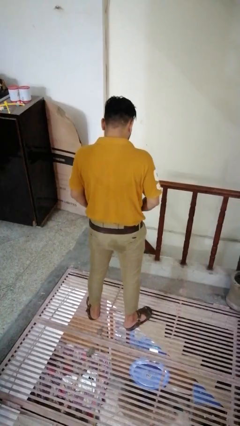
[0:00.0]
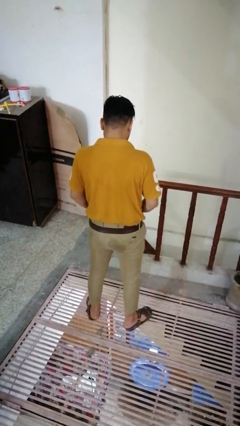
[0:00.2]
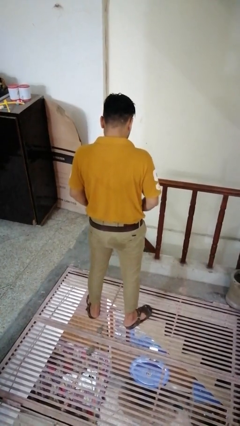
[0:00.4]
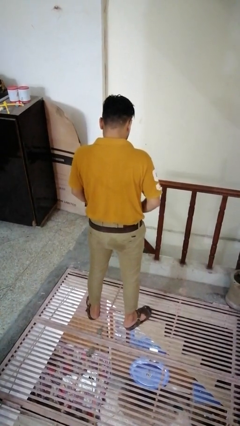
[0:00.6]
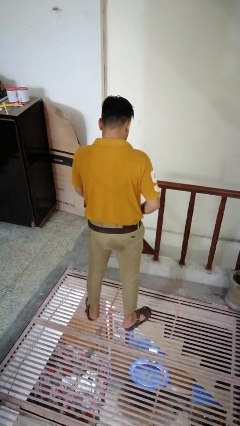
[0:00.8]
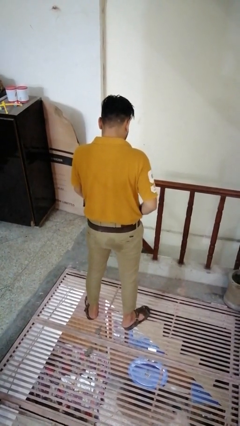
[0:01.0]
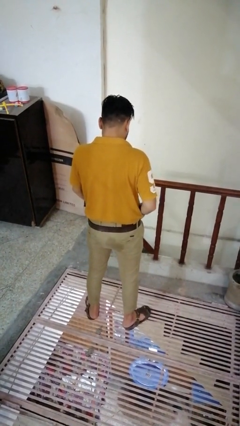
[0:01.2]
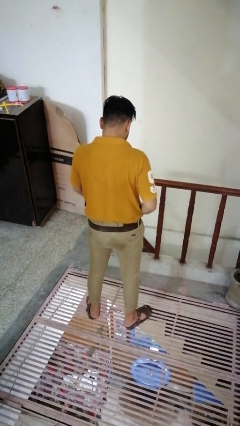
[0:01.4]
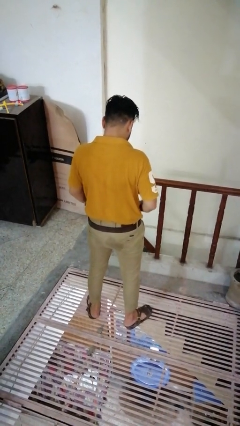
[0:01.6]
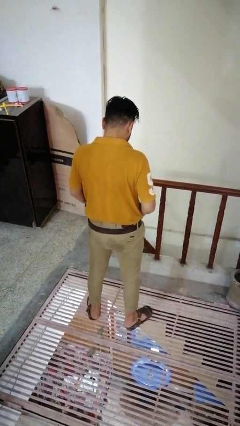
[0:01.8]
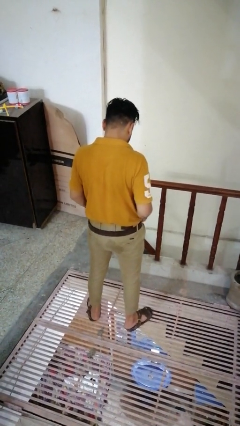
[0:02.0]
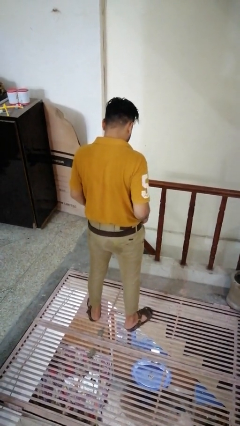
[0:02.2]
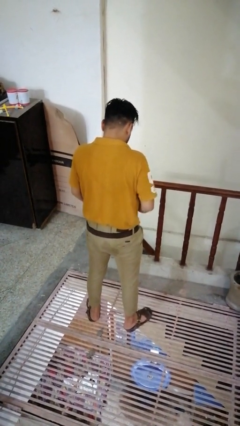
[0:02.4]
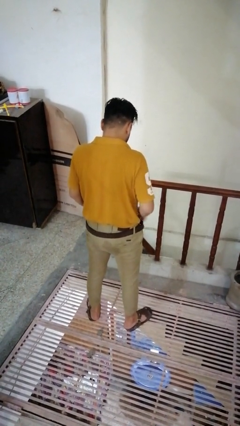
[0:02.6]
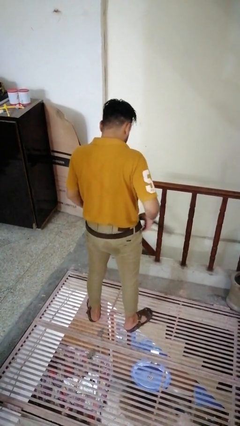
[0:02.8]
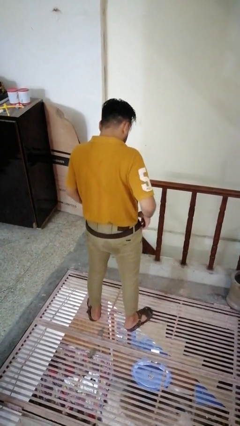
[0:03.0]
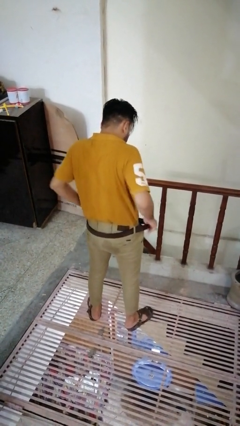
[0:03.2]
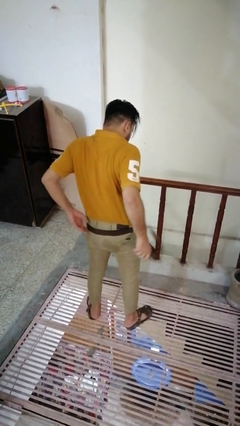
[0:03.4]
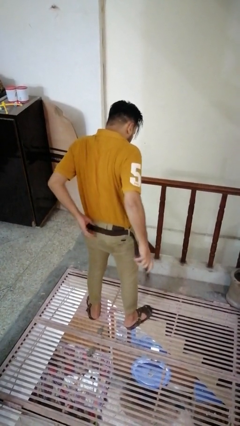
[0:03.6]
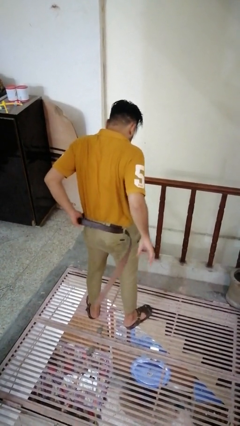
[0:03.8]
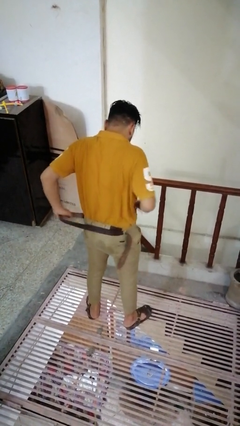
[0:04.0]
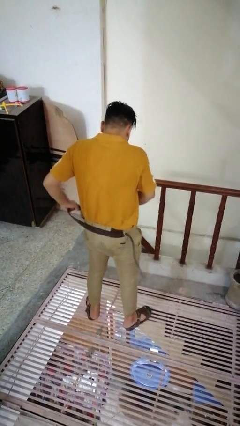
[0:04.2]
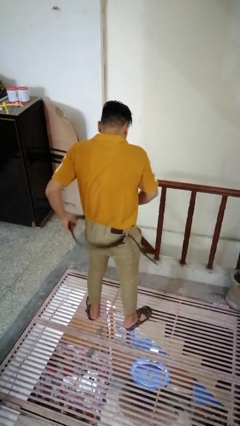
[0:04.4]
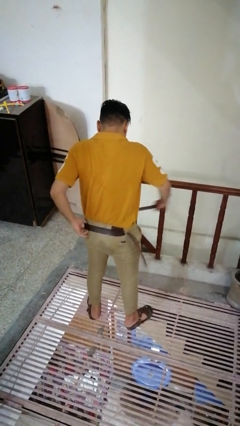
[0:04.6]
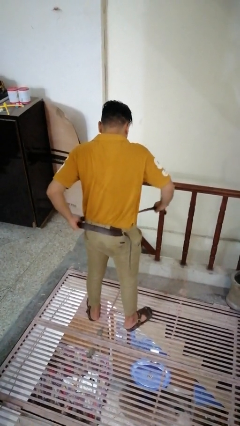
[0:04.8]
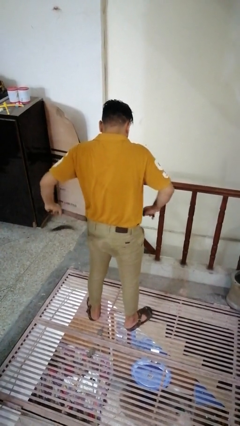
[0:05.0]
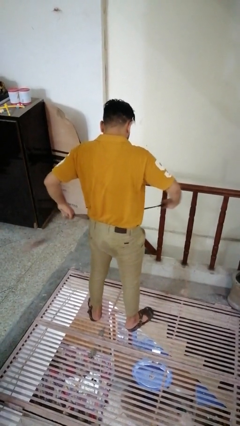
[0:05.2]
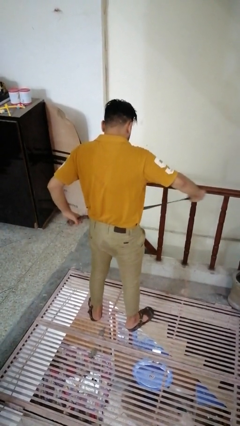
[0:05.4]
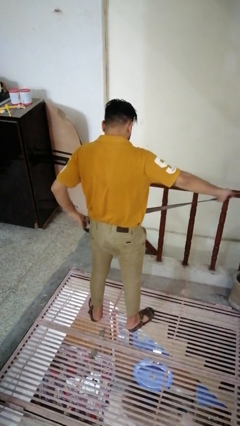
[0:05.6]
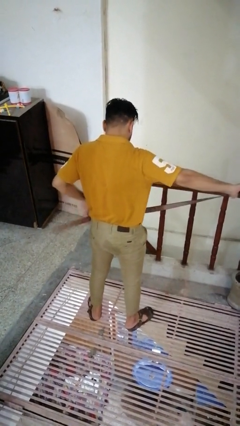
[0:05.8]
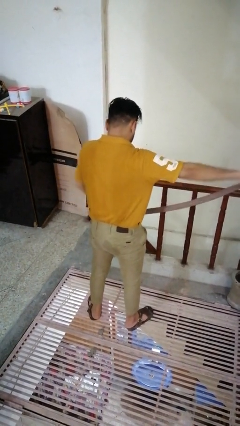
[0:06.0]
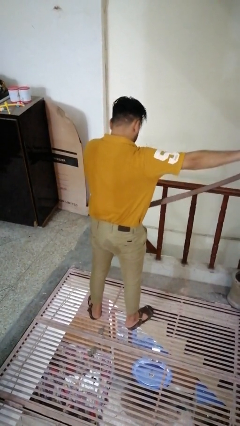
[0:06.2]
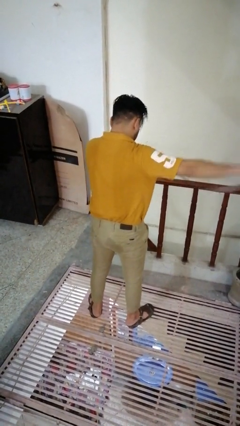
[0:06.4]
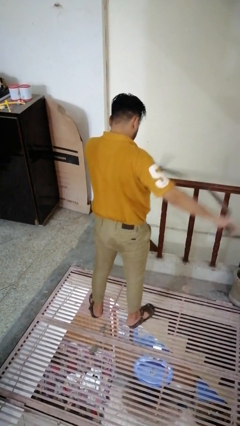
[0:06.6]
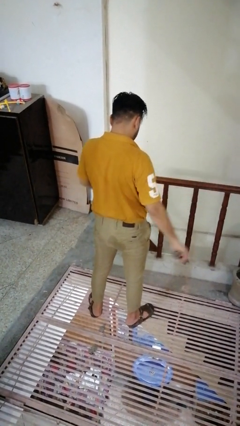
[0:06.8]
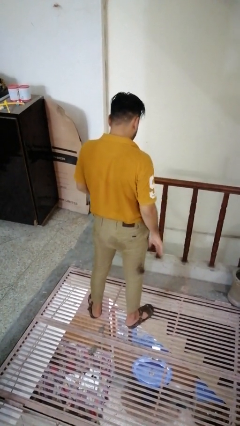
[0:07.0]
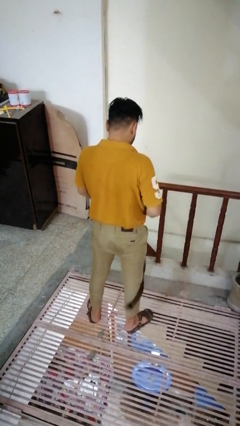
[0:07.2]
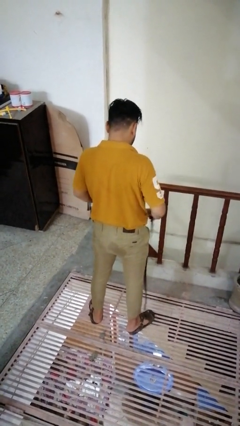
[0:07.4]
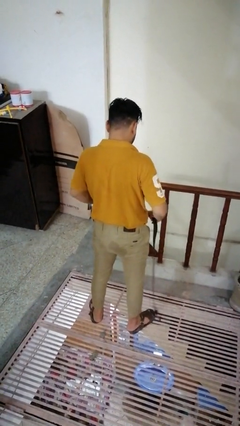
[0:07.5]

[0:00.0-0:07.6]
person takes off belt

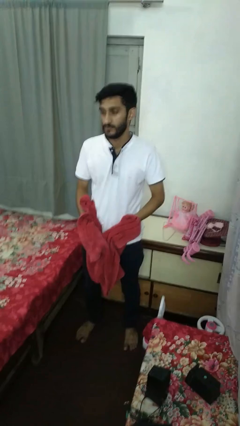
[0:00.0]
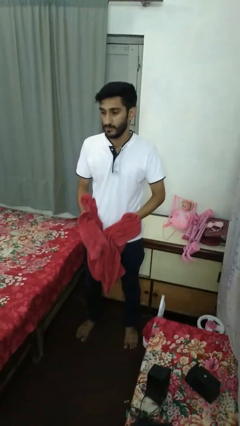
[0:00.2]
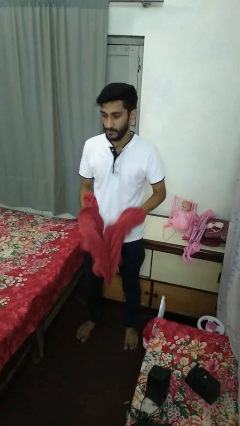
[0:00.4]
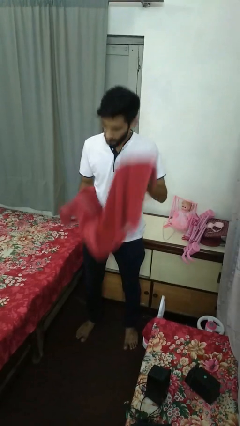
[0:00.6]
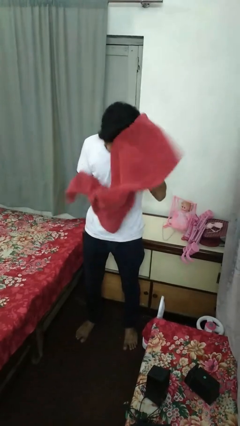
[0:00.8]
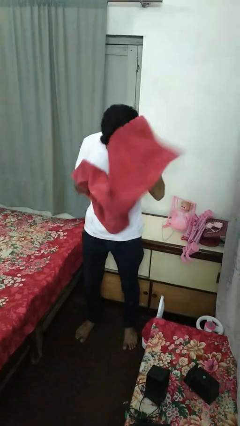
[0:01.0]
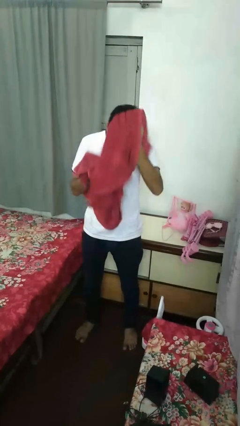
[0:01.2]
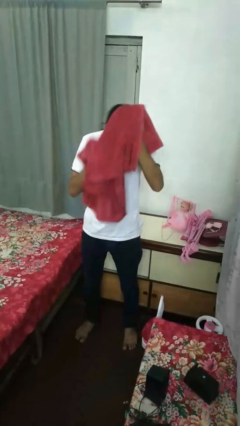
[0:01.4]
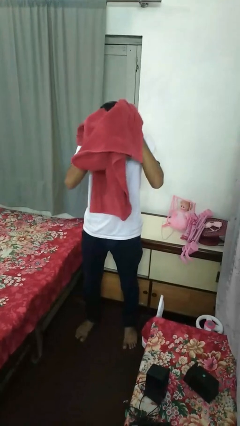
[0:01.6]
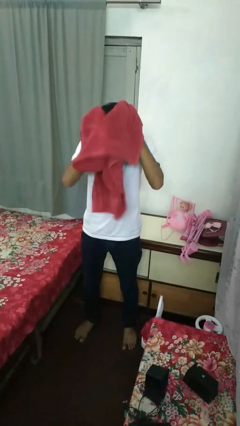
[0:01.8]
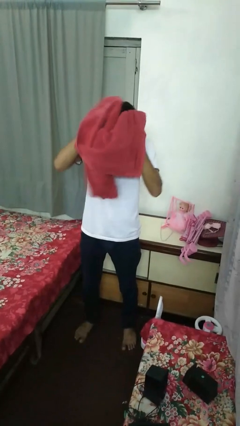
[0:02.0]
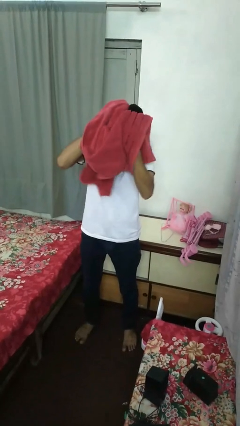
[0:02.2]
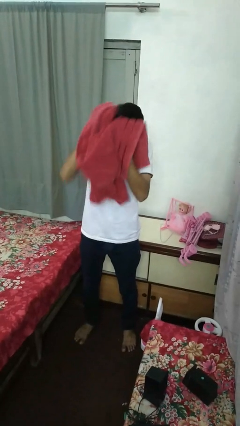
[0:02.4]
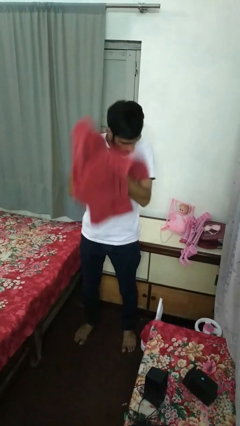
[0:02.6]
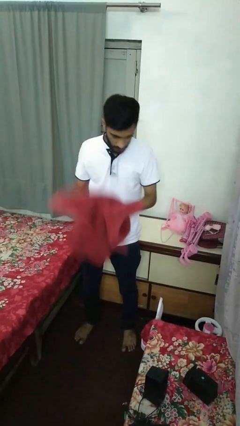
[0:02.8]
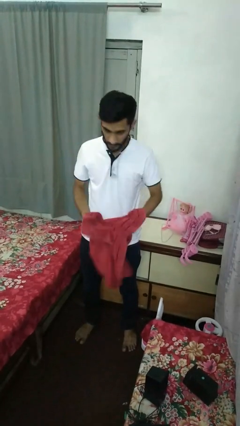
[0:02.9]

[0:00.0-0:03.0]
person dries hair with towel

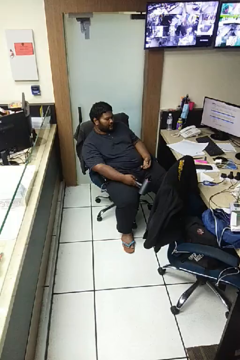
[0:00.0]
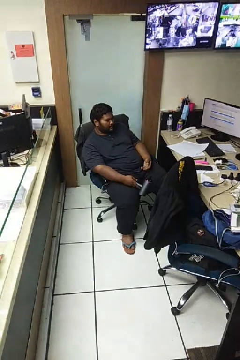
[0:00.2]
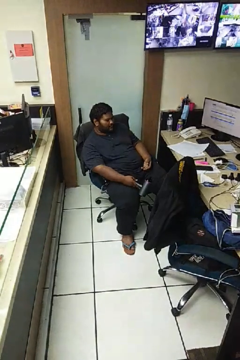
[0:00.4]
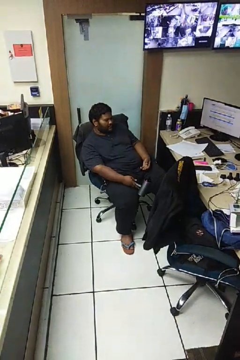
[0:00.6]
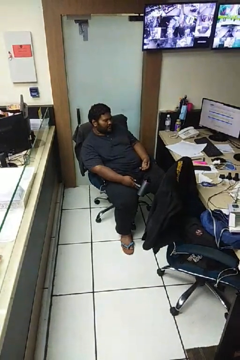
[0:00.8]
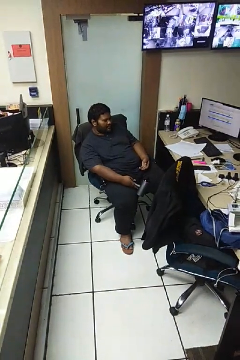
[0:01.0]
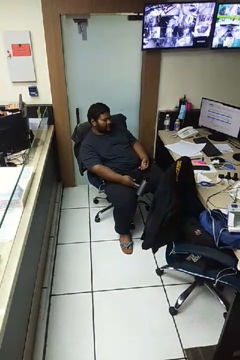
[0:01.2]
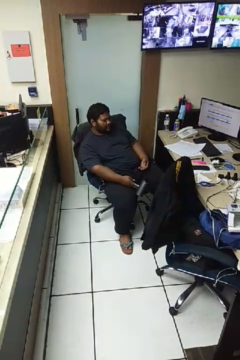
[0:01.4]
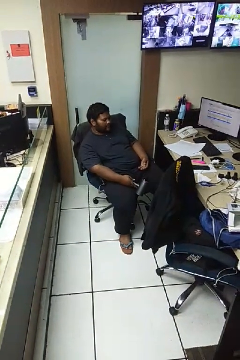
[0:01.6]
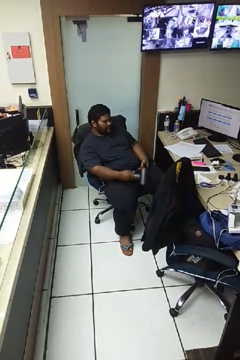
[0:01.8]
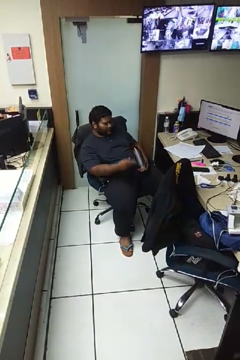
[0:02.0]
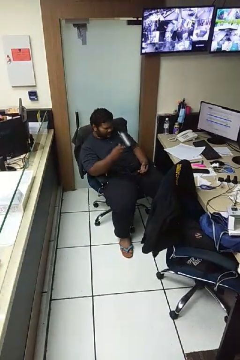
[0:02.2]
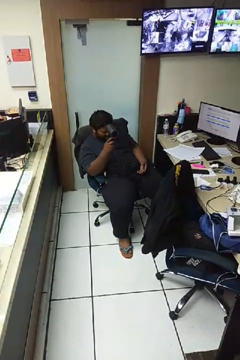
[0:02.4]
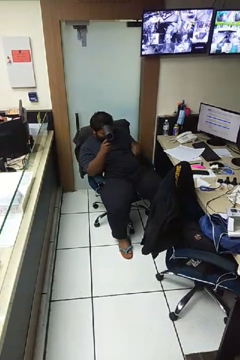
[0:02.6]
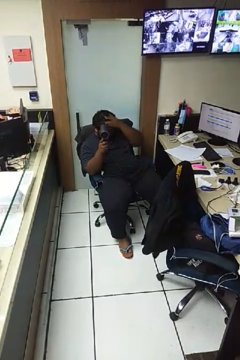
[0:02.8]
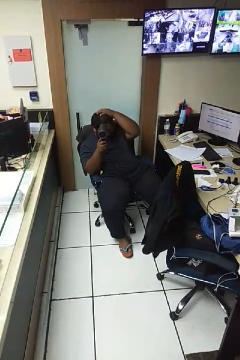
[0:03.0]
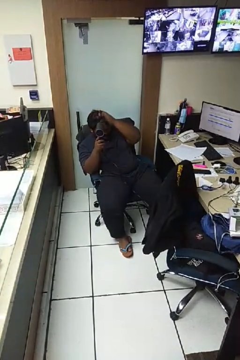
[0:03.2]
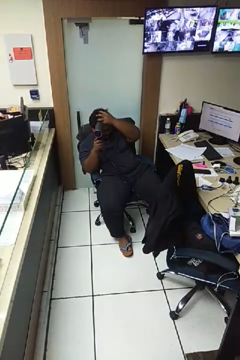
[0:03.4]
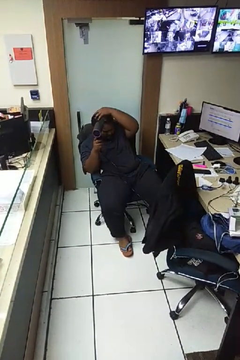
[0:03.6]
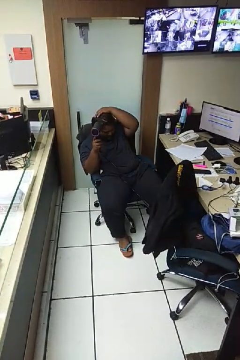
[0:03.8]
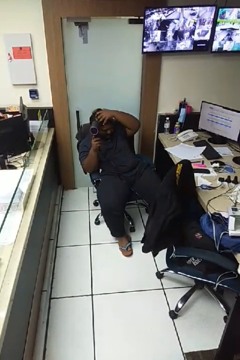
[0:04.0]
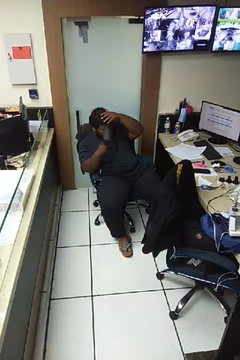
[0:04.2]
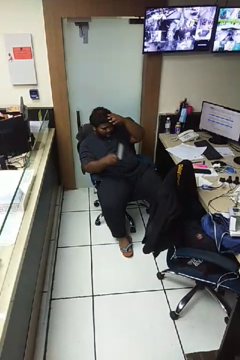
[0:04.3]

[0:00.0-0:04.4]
person dries hair with hairdryer

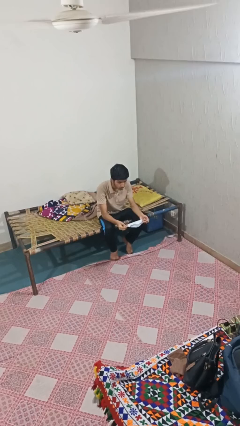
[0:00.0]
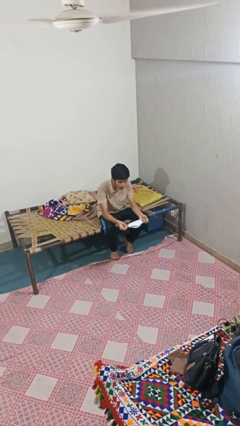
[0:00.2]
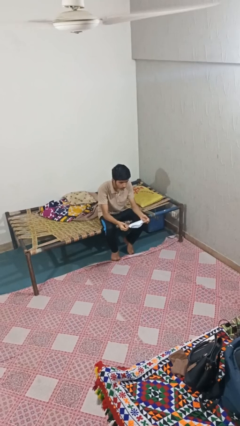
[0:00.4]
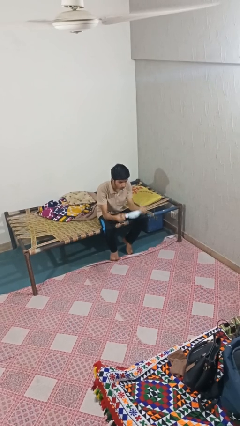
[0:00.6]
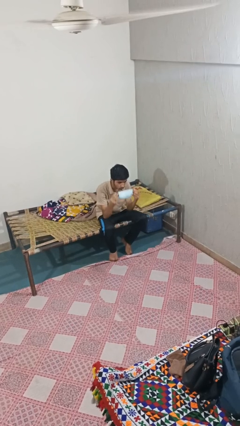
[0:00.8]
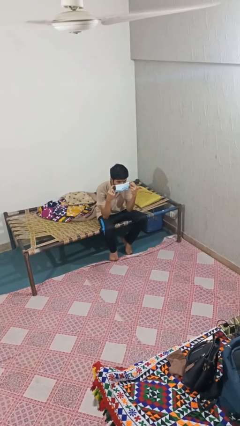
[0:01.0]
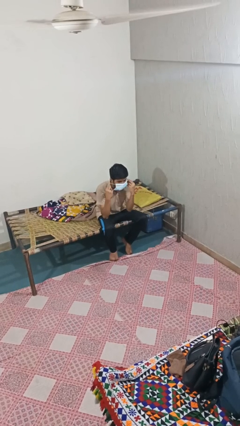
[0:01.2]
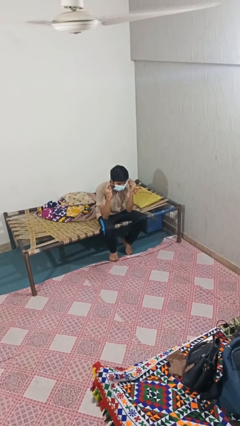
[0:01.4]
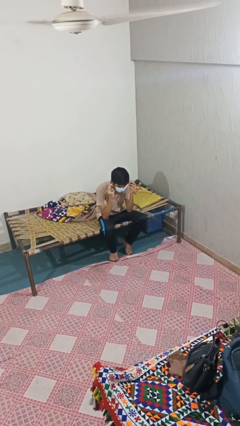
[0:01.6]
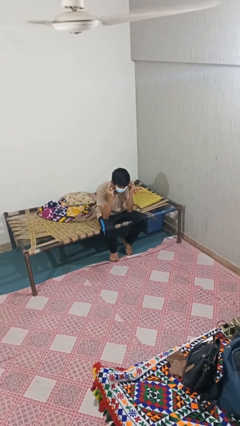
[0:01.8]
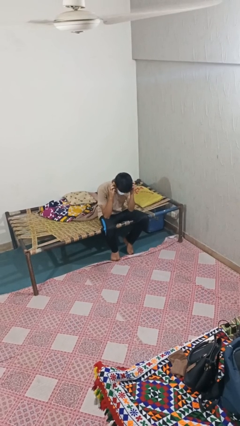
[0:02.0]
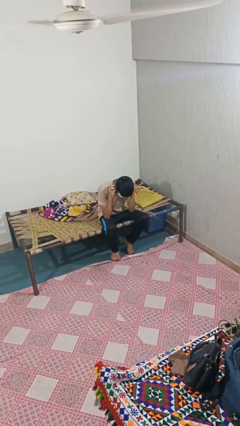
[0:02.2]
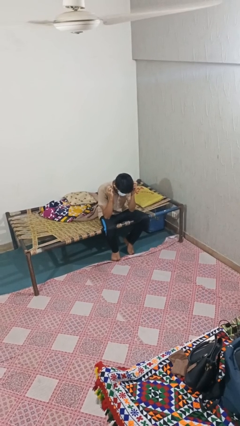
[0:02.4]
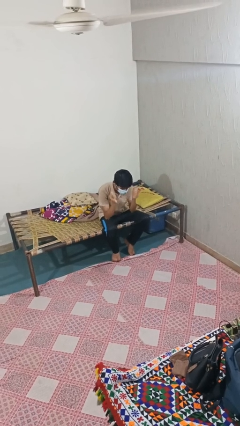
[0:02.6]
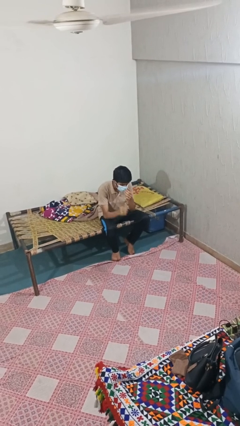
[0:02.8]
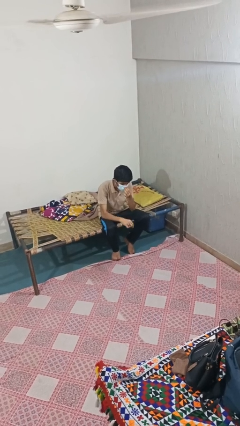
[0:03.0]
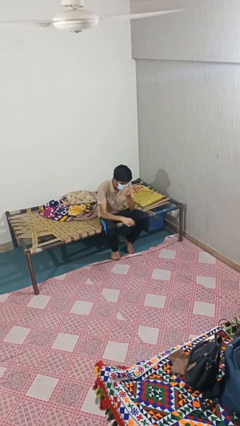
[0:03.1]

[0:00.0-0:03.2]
person puts on facemask
